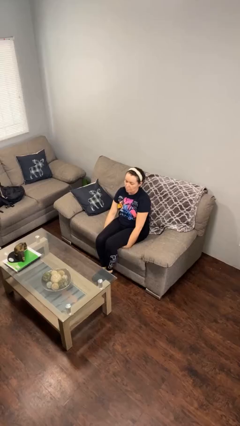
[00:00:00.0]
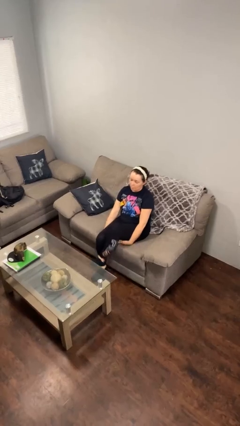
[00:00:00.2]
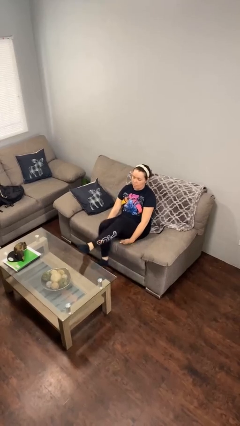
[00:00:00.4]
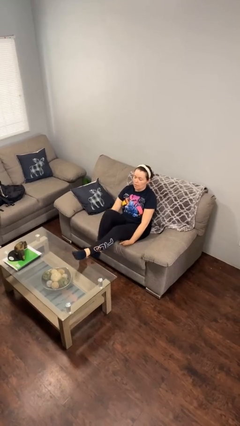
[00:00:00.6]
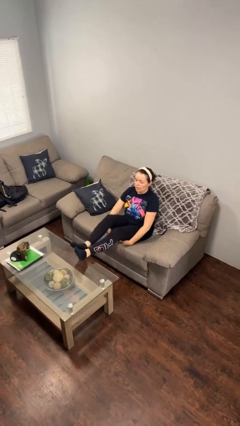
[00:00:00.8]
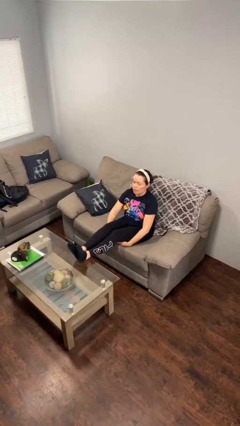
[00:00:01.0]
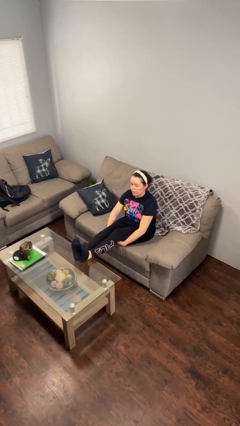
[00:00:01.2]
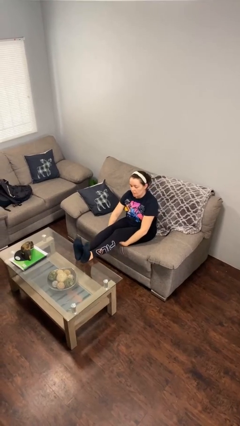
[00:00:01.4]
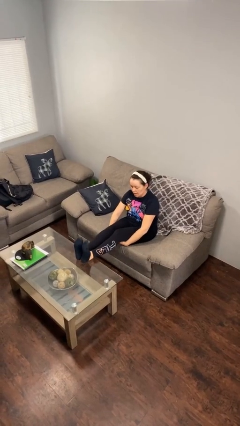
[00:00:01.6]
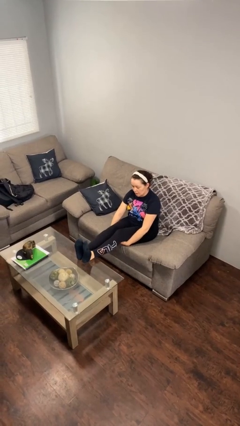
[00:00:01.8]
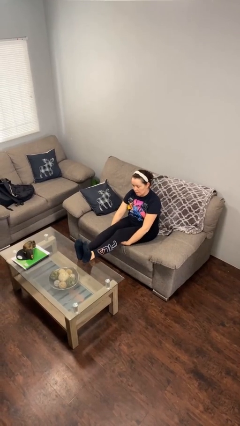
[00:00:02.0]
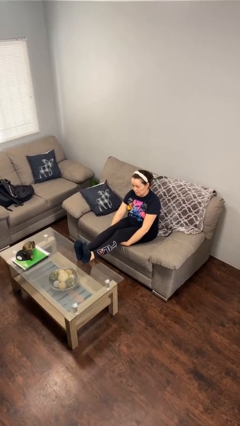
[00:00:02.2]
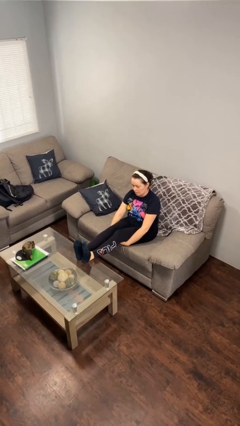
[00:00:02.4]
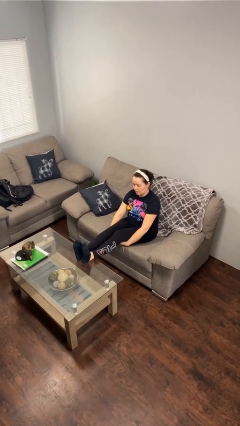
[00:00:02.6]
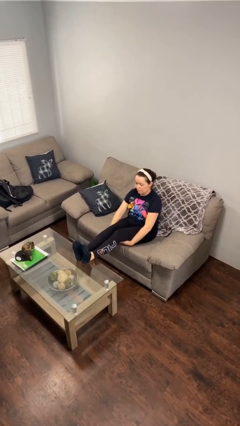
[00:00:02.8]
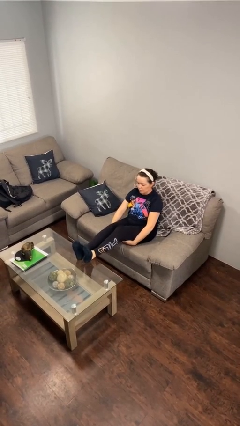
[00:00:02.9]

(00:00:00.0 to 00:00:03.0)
person puts feet up

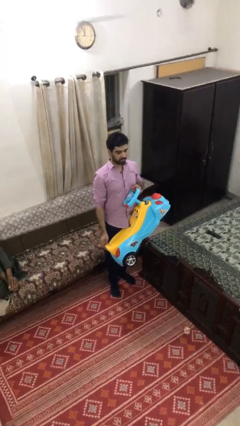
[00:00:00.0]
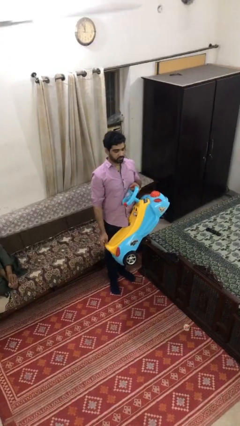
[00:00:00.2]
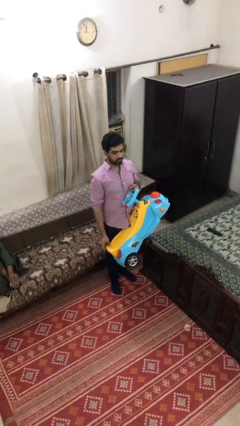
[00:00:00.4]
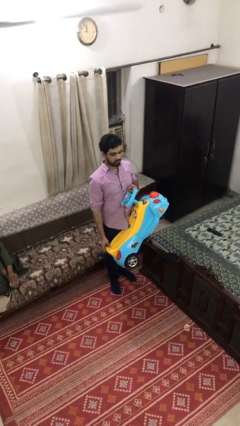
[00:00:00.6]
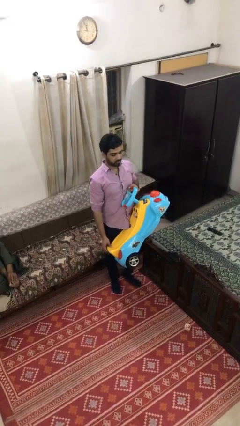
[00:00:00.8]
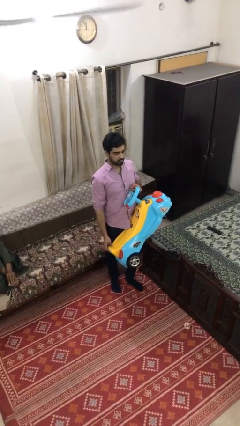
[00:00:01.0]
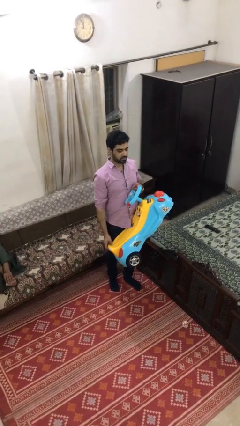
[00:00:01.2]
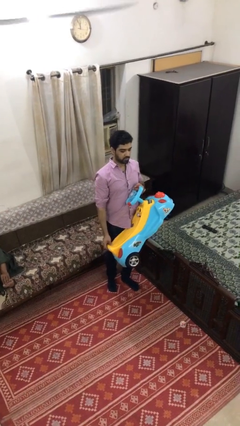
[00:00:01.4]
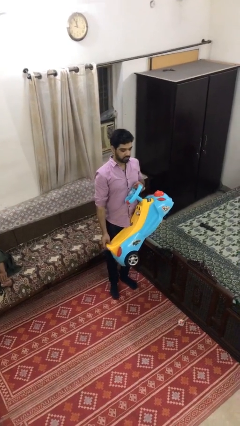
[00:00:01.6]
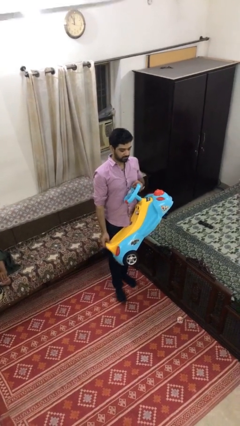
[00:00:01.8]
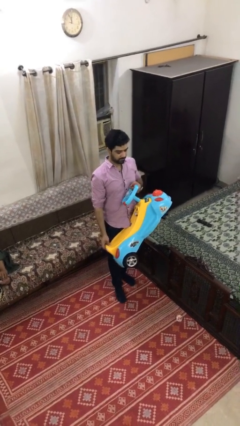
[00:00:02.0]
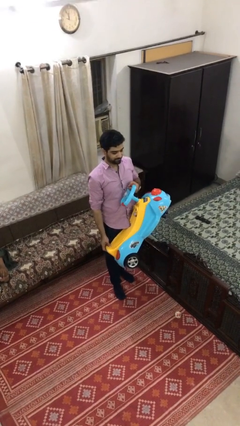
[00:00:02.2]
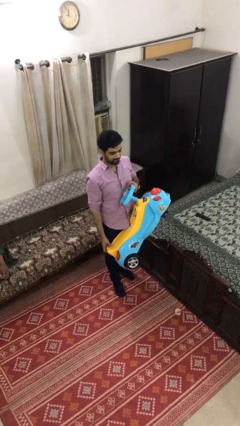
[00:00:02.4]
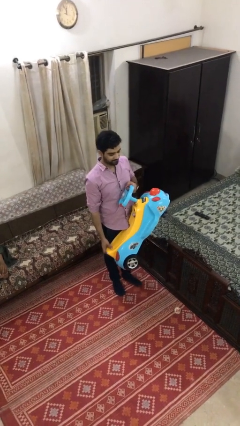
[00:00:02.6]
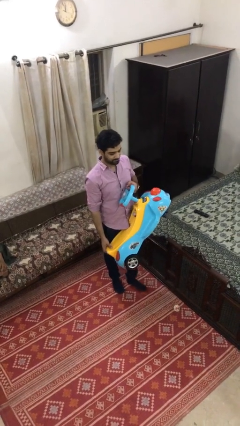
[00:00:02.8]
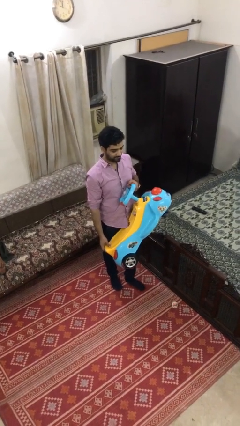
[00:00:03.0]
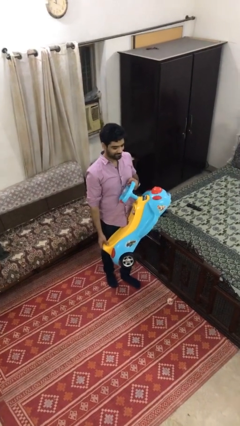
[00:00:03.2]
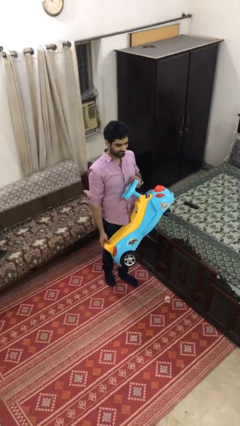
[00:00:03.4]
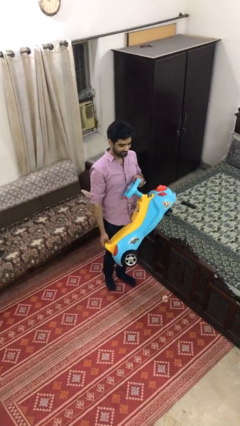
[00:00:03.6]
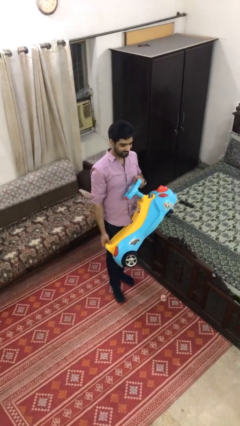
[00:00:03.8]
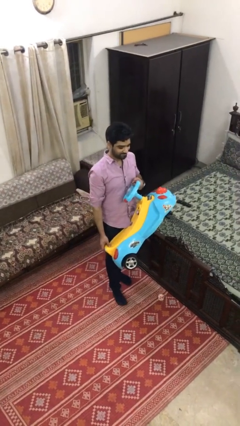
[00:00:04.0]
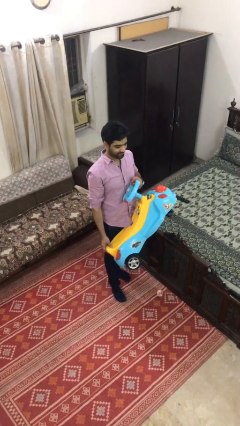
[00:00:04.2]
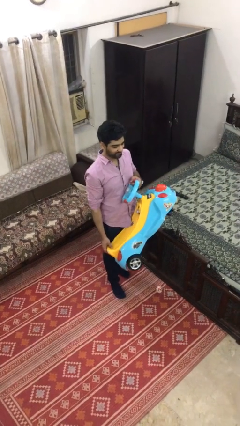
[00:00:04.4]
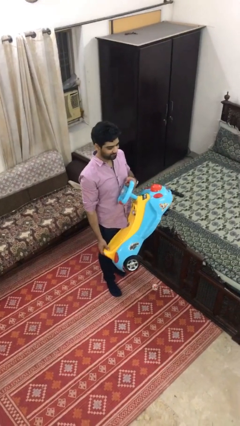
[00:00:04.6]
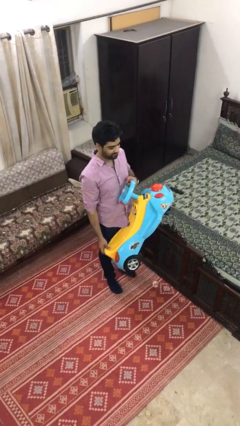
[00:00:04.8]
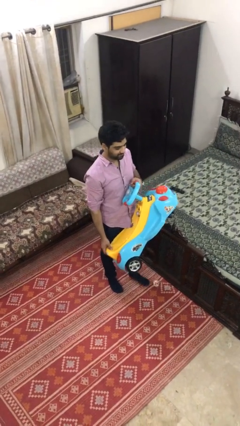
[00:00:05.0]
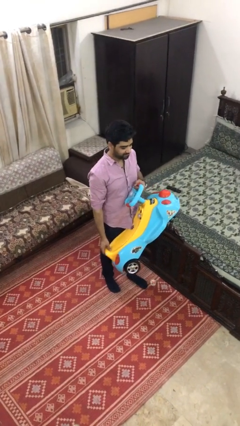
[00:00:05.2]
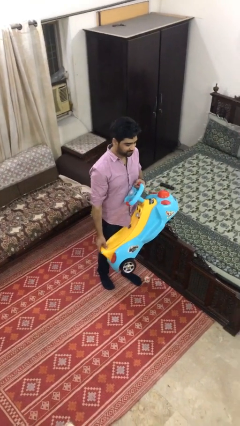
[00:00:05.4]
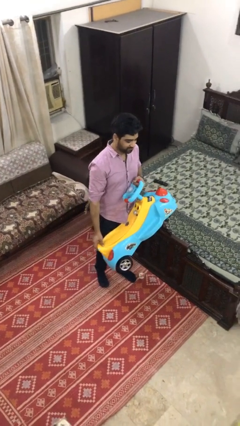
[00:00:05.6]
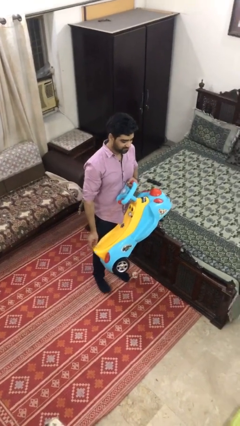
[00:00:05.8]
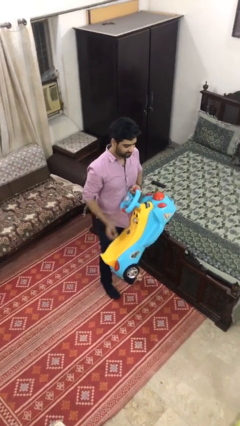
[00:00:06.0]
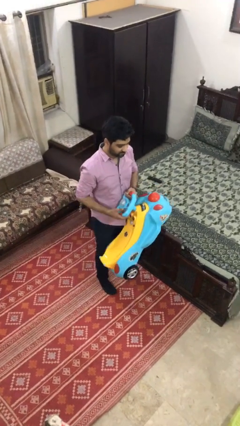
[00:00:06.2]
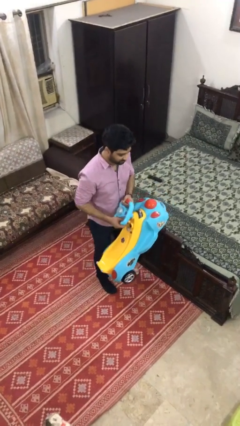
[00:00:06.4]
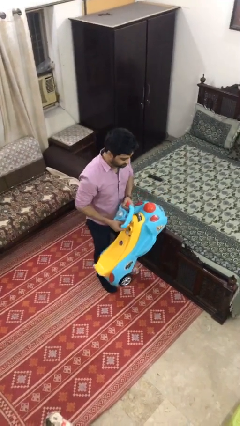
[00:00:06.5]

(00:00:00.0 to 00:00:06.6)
person carries heavy object

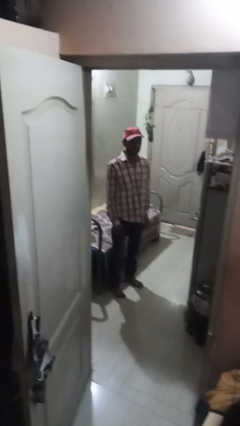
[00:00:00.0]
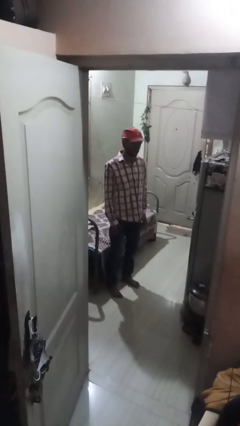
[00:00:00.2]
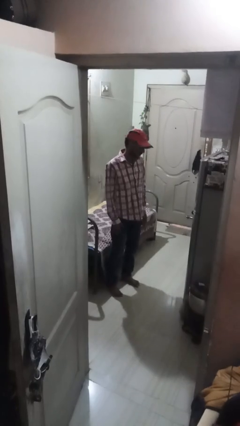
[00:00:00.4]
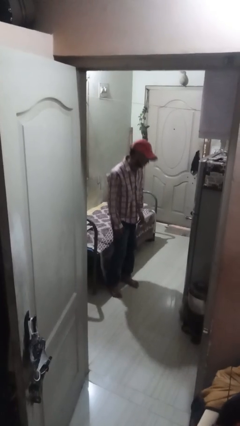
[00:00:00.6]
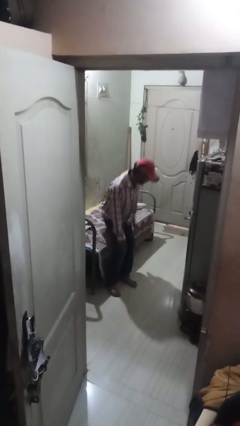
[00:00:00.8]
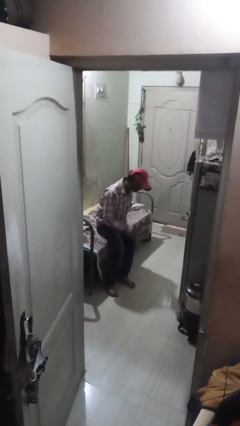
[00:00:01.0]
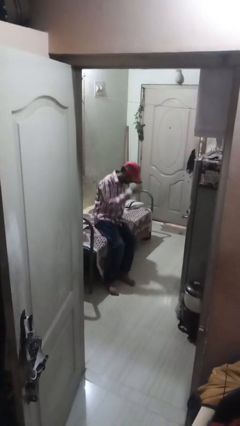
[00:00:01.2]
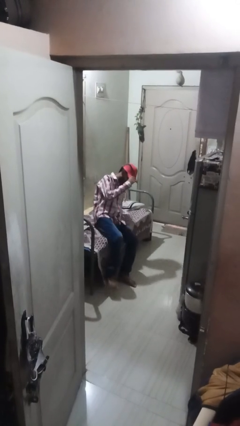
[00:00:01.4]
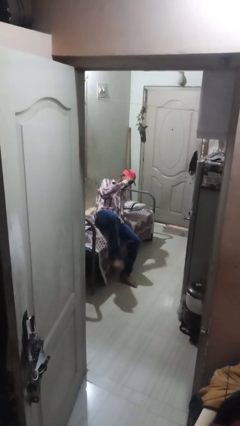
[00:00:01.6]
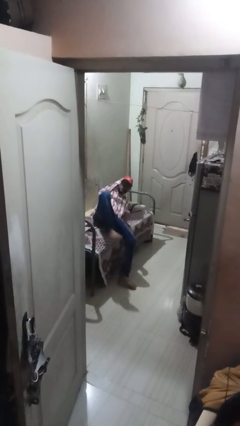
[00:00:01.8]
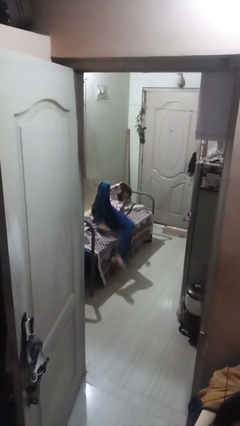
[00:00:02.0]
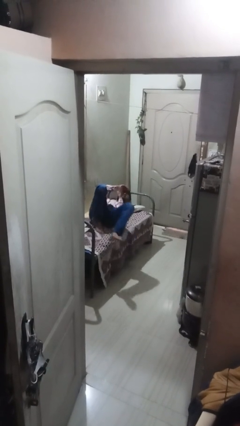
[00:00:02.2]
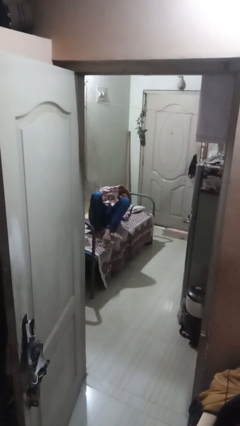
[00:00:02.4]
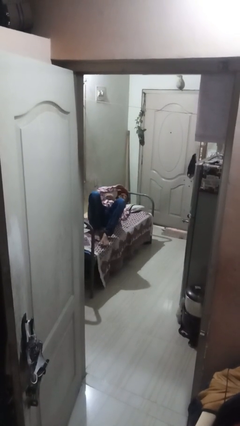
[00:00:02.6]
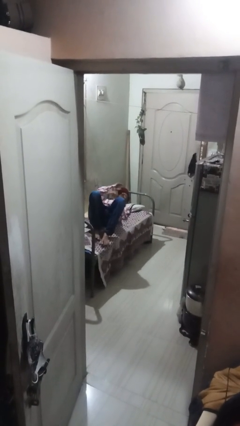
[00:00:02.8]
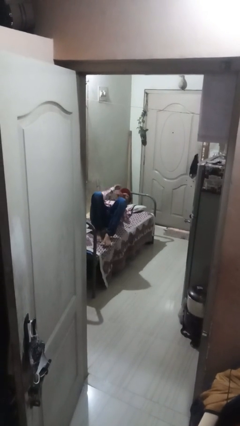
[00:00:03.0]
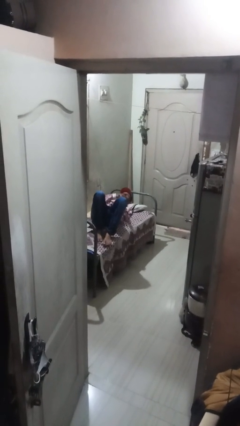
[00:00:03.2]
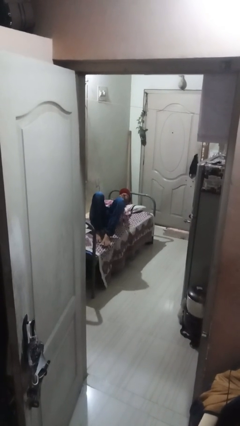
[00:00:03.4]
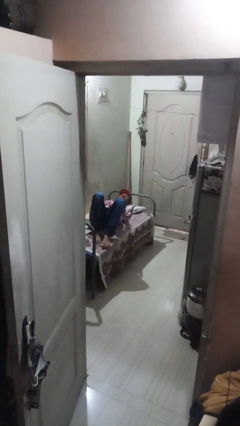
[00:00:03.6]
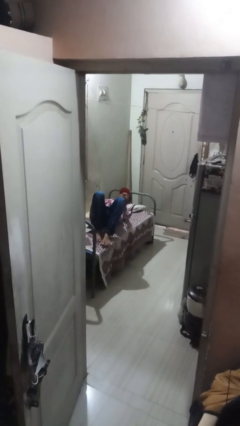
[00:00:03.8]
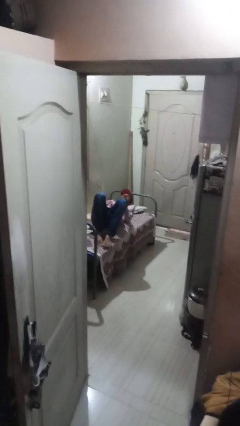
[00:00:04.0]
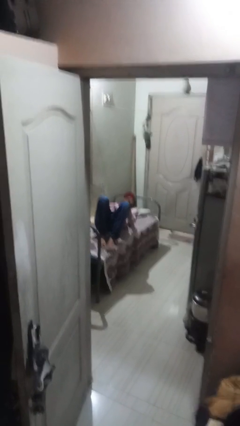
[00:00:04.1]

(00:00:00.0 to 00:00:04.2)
person lies down on bed

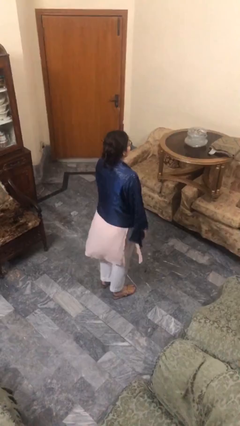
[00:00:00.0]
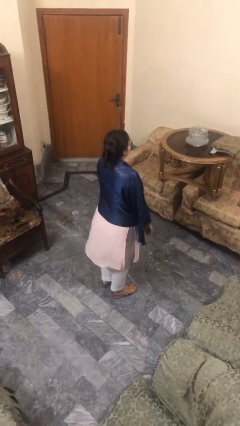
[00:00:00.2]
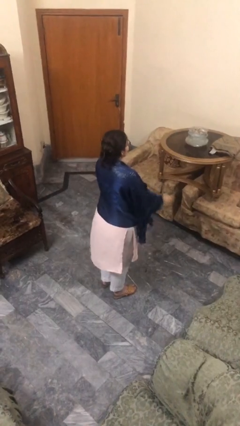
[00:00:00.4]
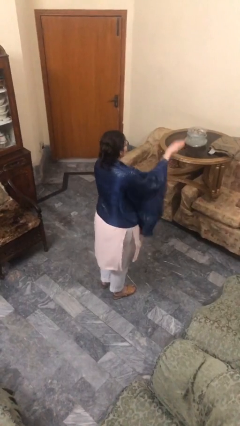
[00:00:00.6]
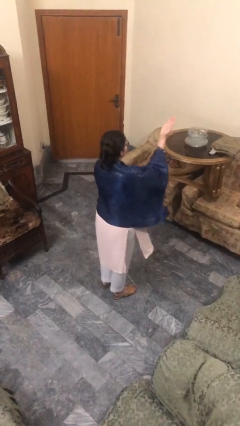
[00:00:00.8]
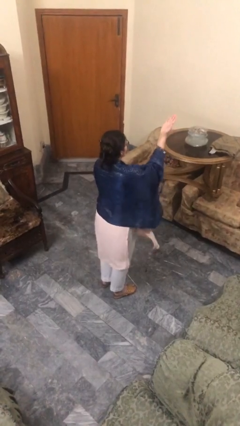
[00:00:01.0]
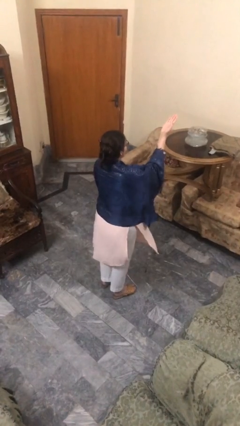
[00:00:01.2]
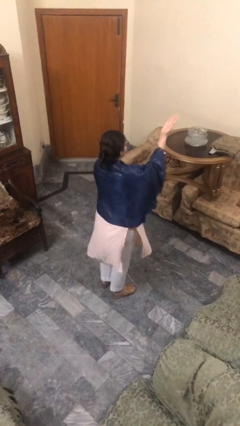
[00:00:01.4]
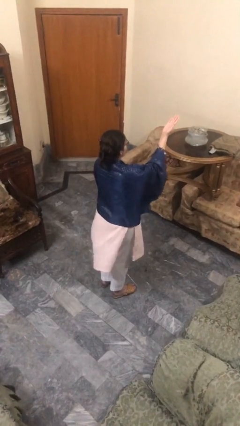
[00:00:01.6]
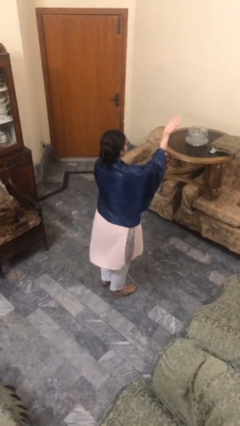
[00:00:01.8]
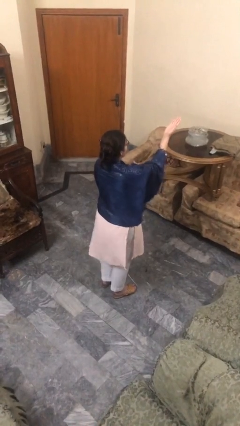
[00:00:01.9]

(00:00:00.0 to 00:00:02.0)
person gestures swipe up

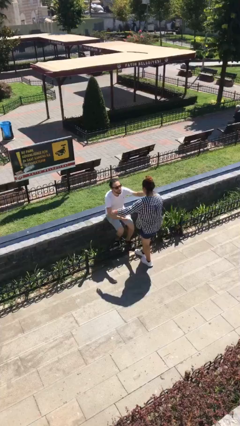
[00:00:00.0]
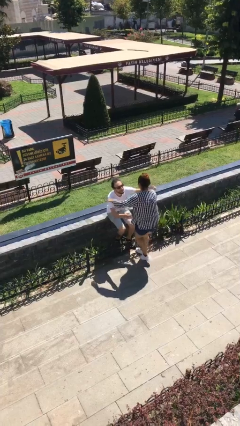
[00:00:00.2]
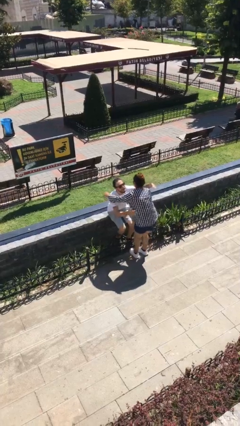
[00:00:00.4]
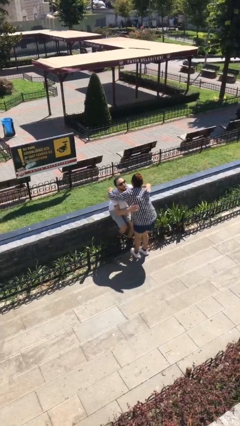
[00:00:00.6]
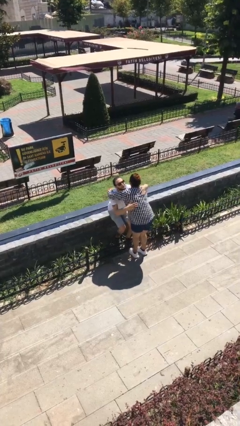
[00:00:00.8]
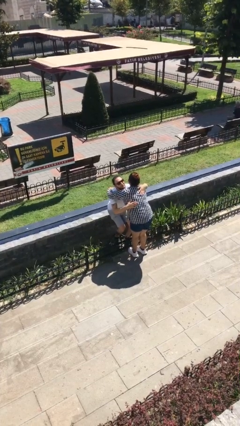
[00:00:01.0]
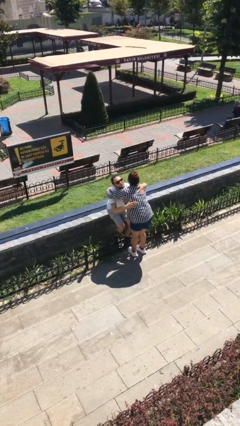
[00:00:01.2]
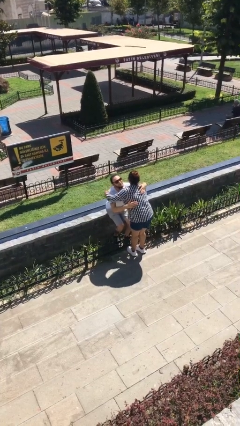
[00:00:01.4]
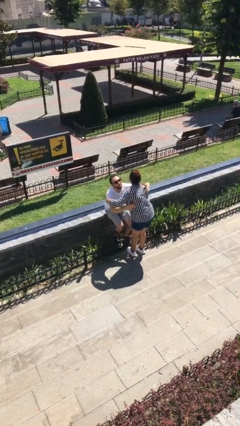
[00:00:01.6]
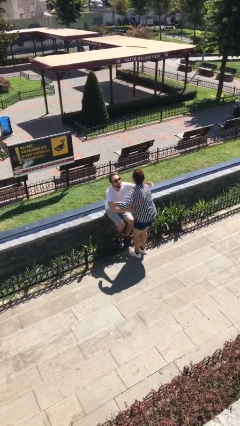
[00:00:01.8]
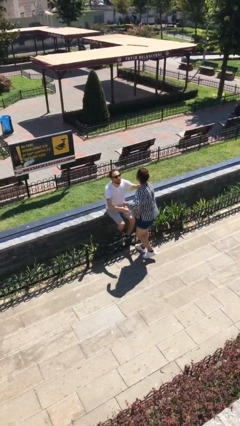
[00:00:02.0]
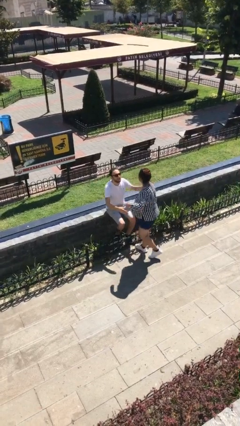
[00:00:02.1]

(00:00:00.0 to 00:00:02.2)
person embraces person
